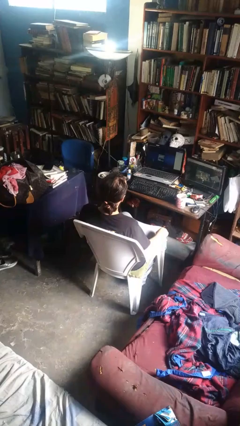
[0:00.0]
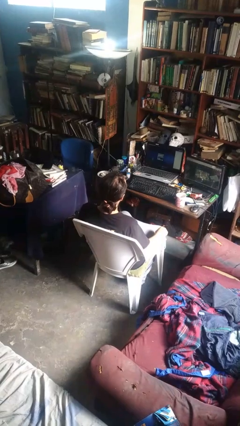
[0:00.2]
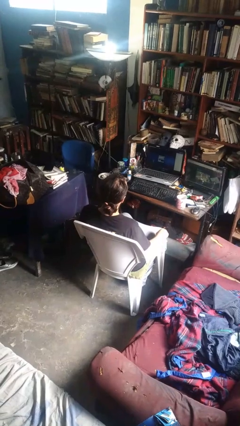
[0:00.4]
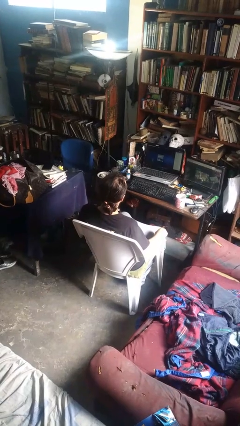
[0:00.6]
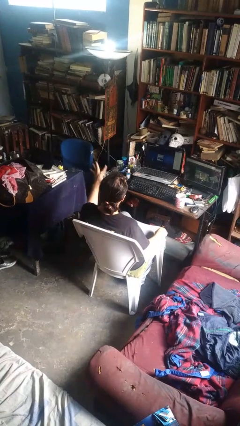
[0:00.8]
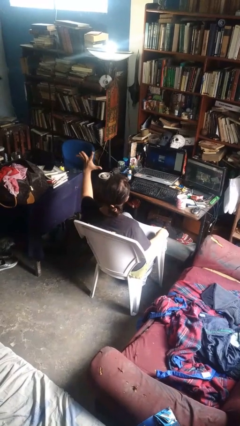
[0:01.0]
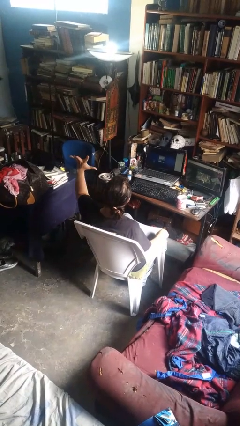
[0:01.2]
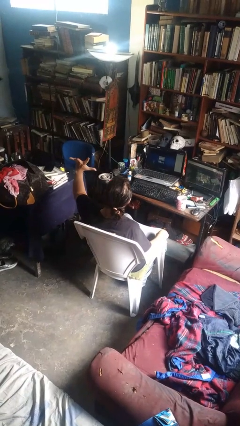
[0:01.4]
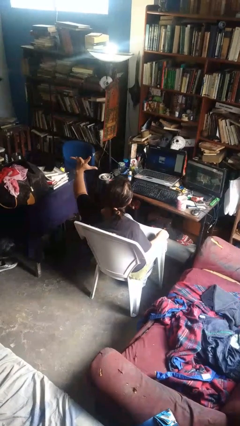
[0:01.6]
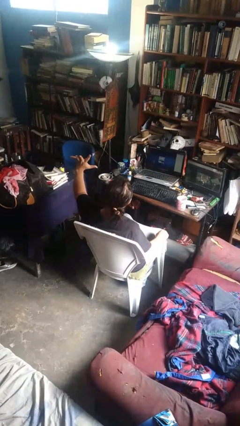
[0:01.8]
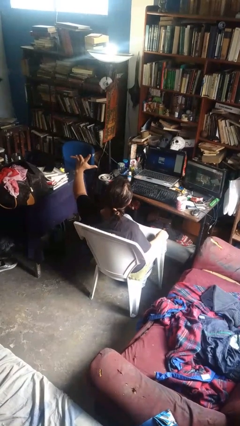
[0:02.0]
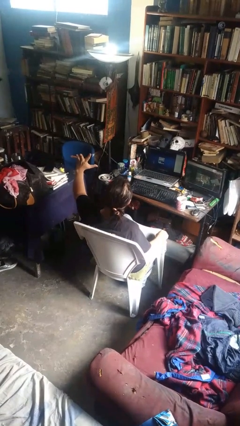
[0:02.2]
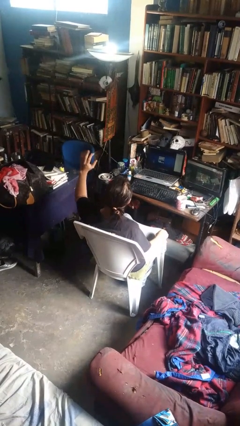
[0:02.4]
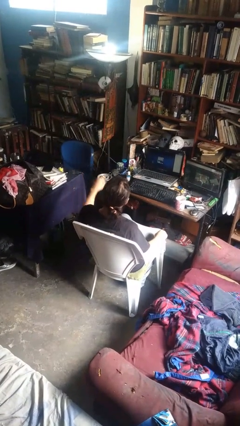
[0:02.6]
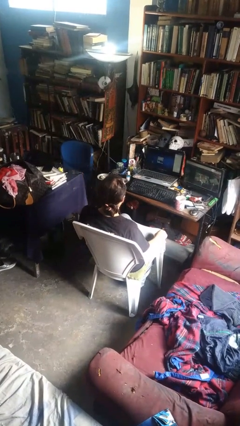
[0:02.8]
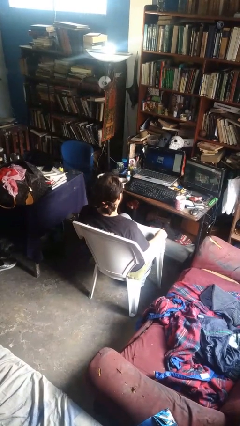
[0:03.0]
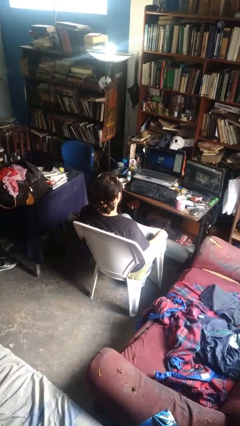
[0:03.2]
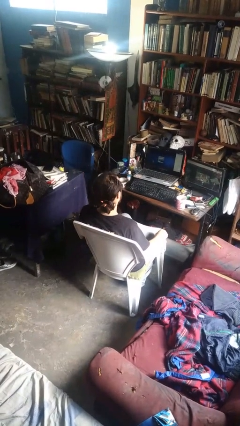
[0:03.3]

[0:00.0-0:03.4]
person gestures number five

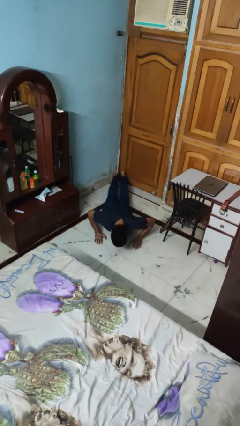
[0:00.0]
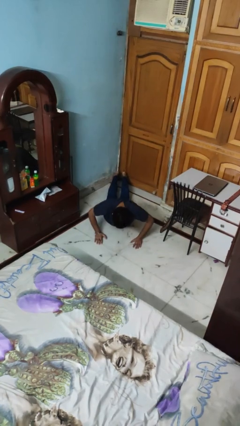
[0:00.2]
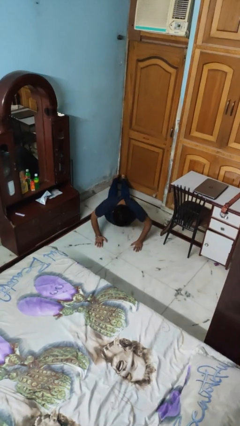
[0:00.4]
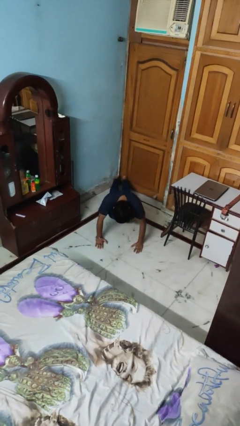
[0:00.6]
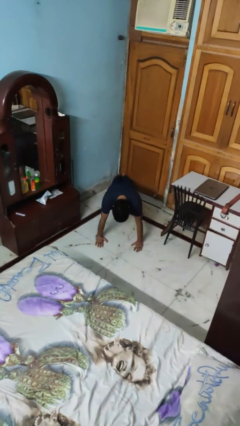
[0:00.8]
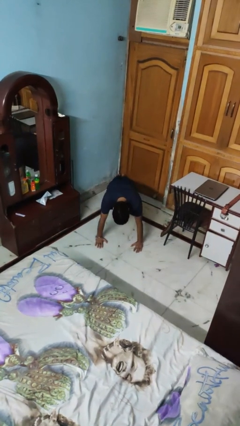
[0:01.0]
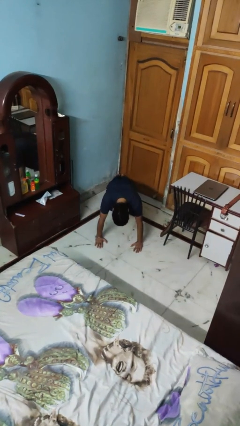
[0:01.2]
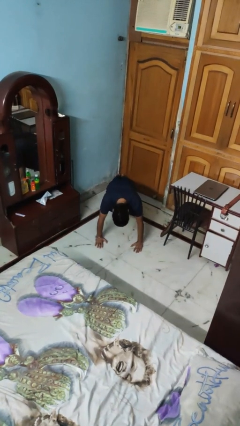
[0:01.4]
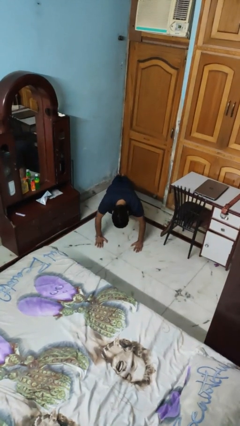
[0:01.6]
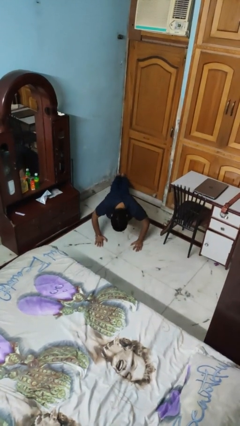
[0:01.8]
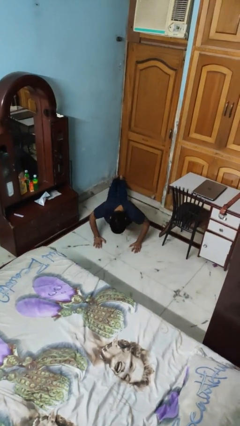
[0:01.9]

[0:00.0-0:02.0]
person exercises with pushup

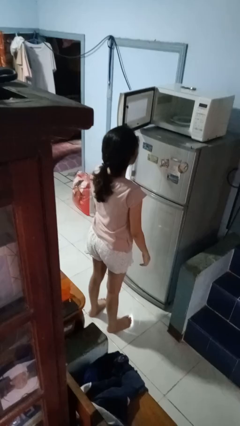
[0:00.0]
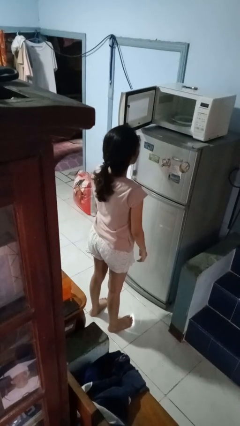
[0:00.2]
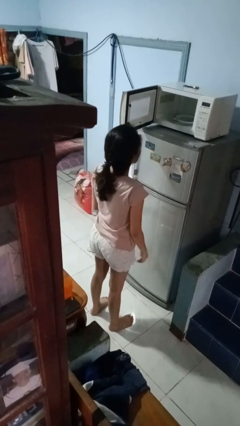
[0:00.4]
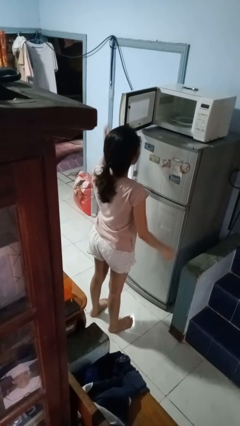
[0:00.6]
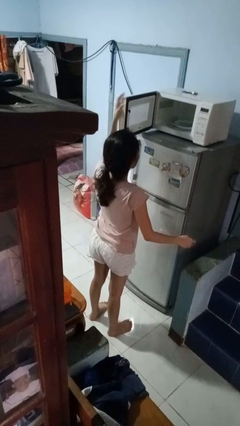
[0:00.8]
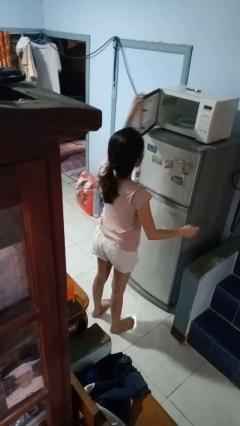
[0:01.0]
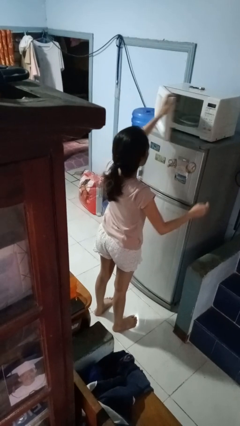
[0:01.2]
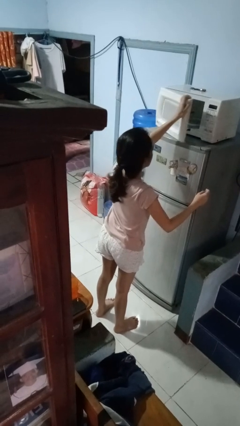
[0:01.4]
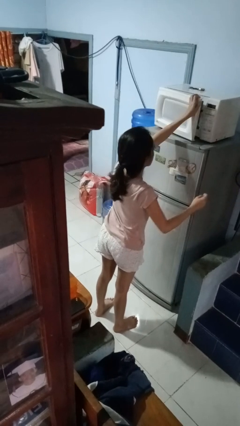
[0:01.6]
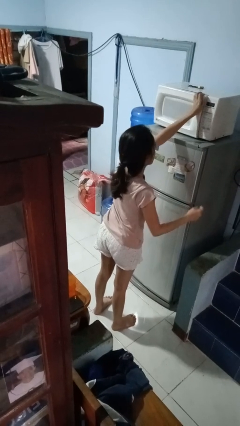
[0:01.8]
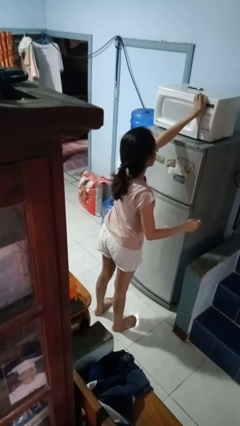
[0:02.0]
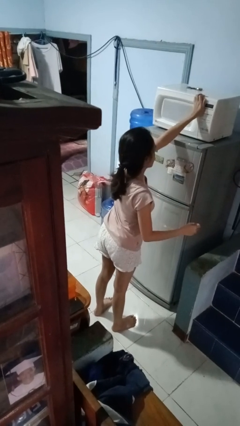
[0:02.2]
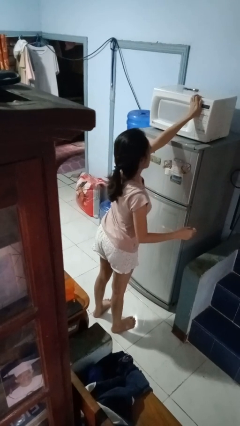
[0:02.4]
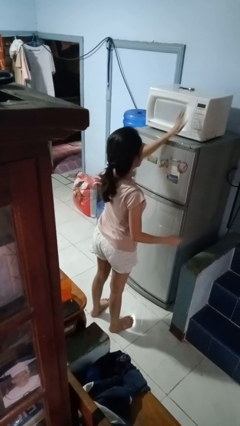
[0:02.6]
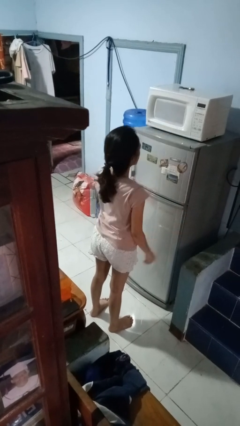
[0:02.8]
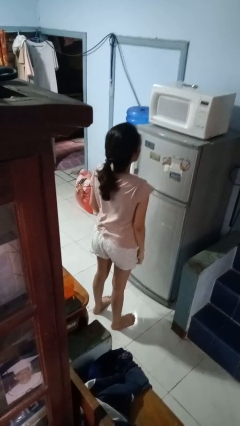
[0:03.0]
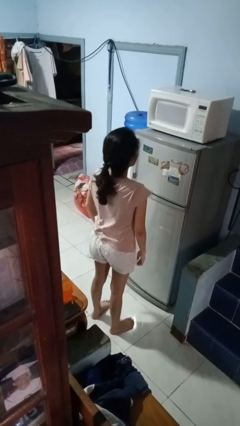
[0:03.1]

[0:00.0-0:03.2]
person closes microwave

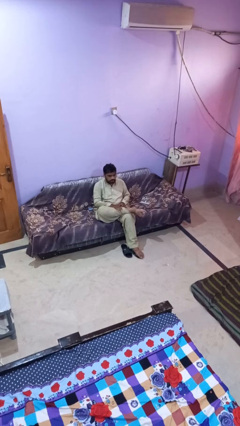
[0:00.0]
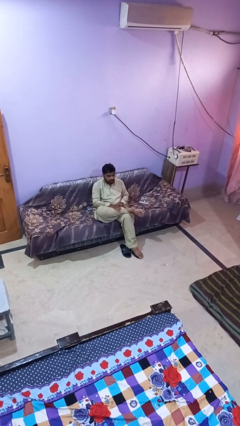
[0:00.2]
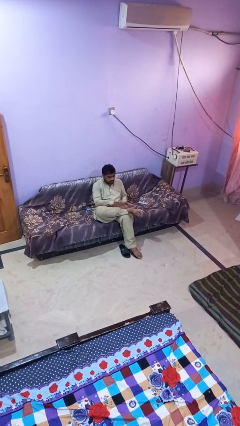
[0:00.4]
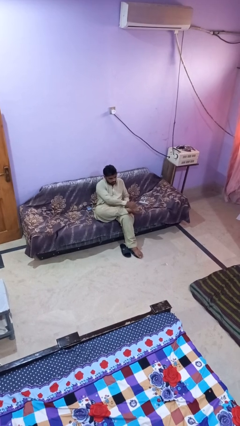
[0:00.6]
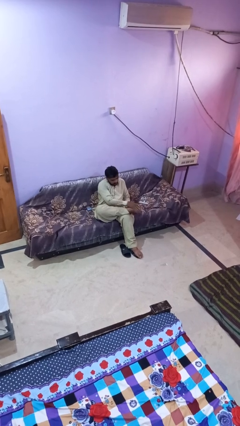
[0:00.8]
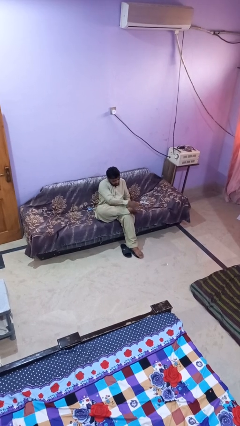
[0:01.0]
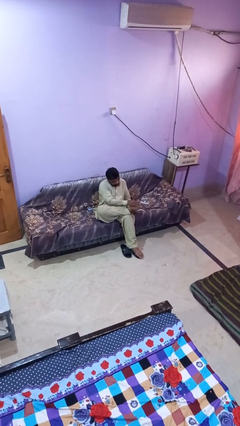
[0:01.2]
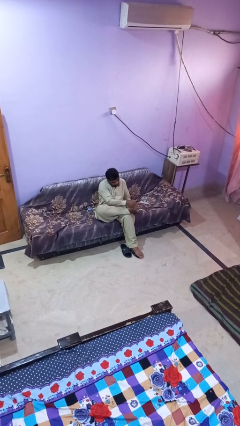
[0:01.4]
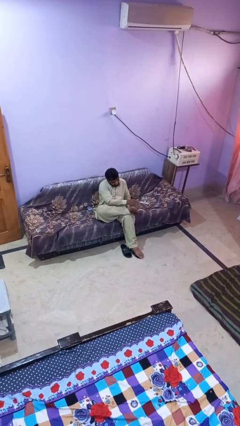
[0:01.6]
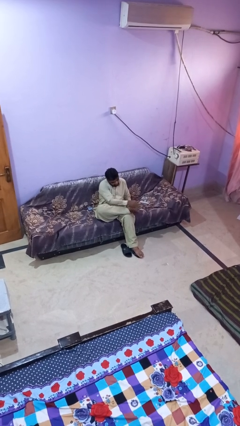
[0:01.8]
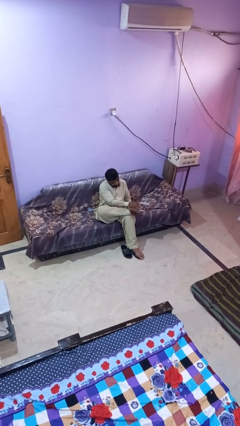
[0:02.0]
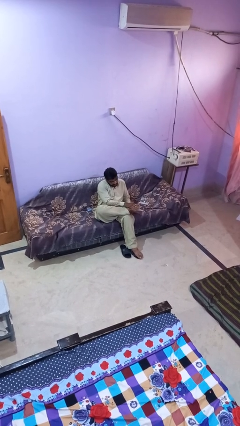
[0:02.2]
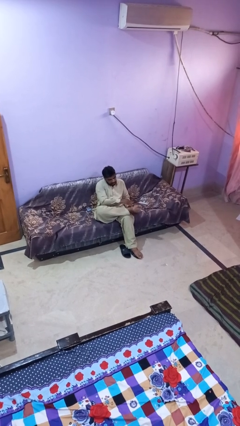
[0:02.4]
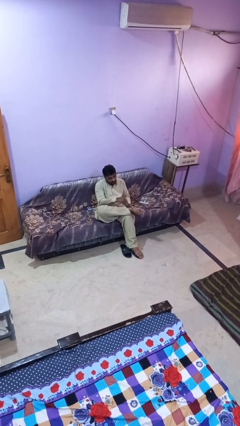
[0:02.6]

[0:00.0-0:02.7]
person rubs foot

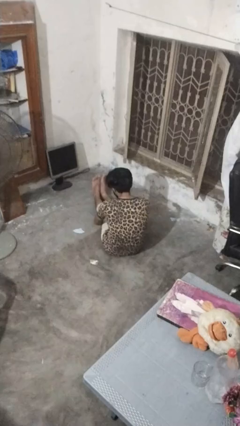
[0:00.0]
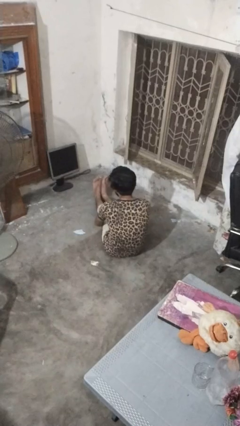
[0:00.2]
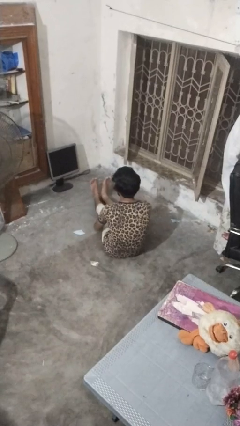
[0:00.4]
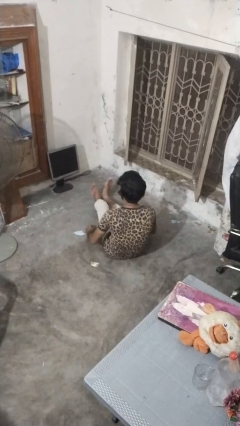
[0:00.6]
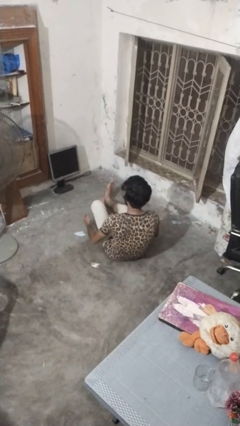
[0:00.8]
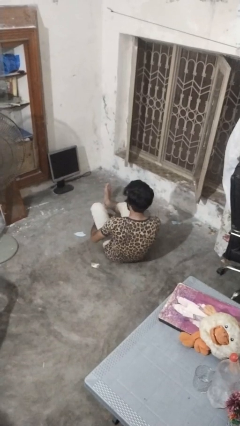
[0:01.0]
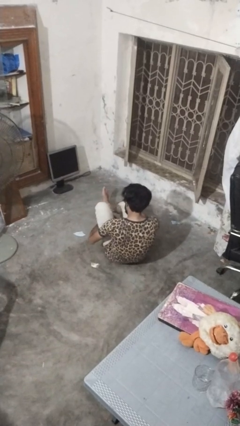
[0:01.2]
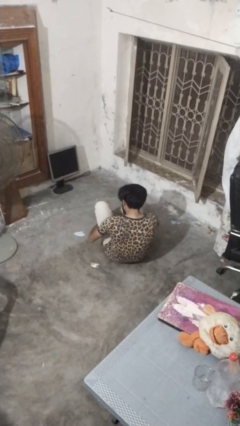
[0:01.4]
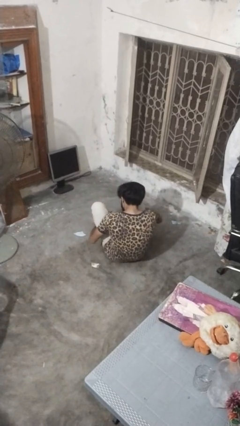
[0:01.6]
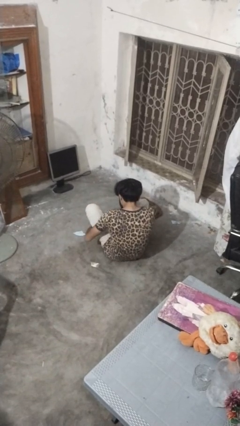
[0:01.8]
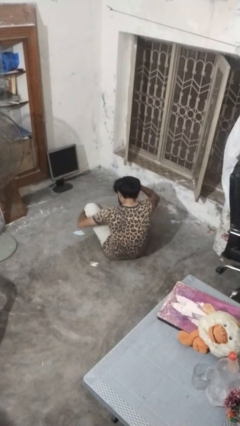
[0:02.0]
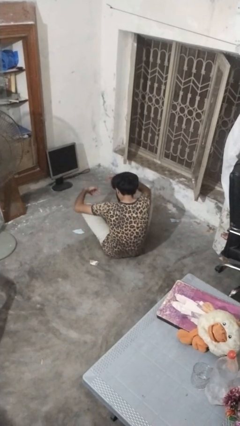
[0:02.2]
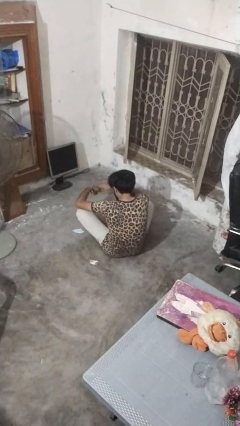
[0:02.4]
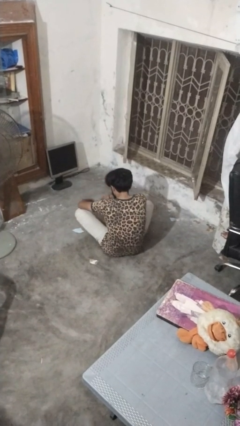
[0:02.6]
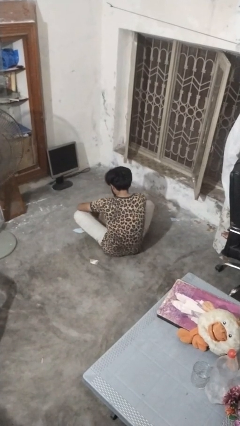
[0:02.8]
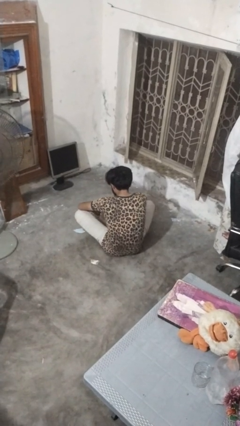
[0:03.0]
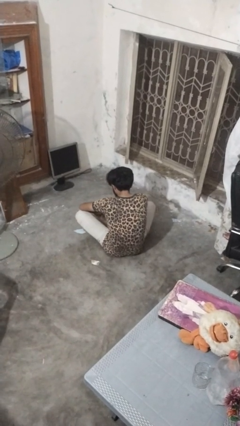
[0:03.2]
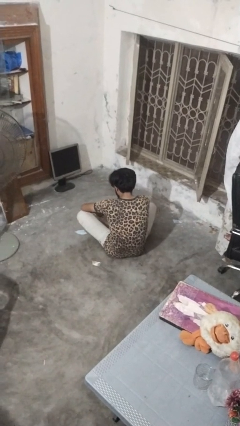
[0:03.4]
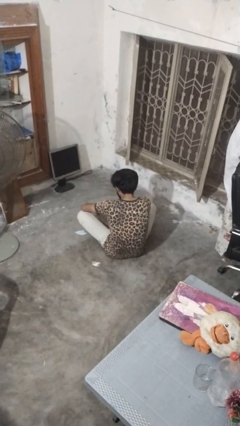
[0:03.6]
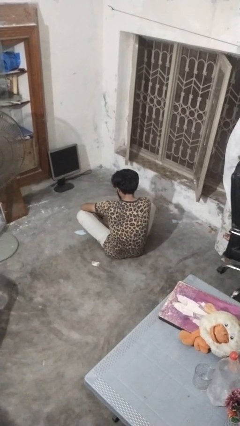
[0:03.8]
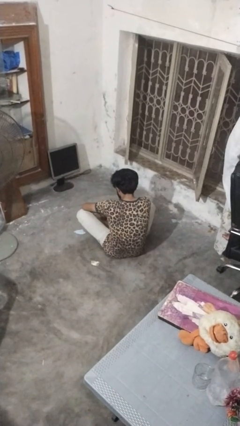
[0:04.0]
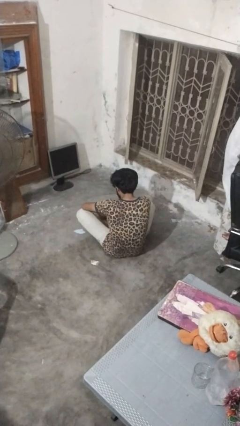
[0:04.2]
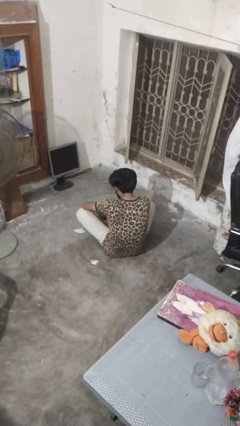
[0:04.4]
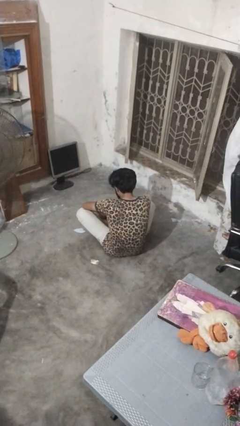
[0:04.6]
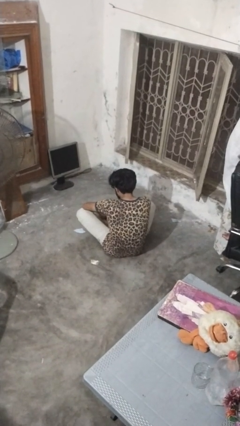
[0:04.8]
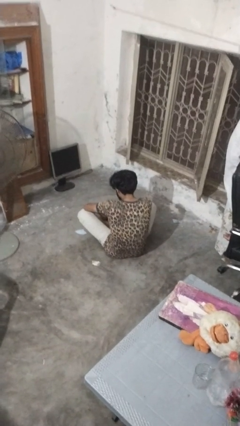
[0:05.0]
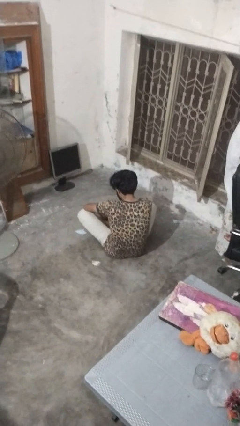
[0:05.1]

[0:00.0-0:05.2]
person crosses legs

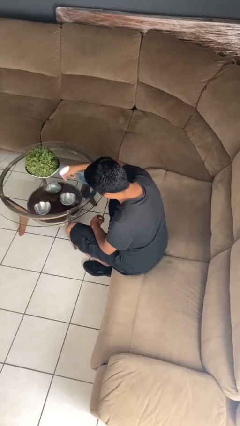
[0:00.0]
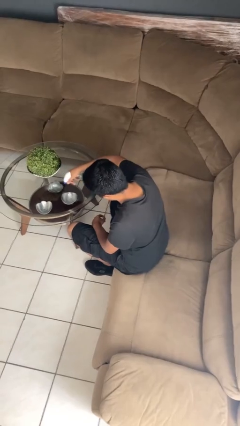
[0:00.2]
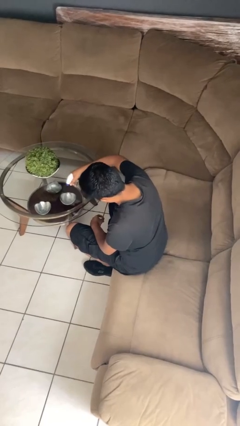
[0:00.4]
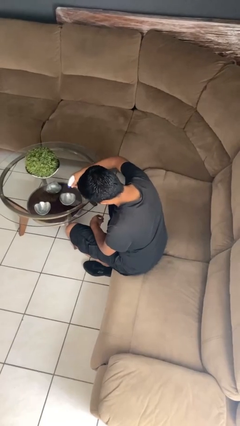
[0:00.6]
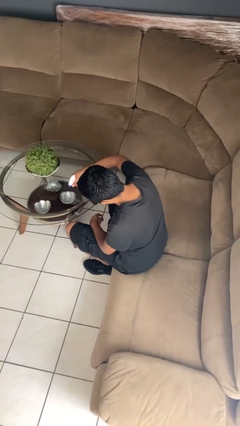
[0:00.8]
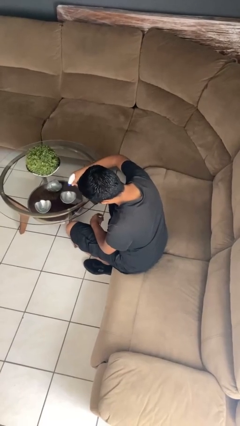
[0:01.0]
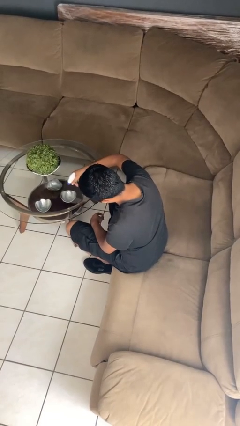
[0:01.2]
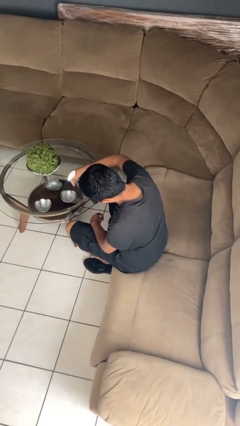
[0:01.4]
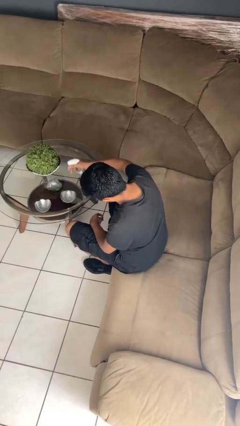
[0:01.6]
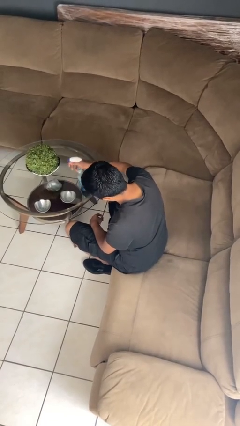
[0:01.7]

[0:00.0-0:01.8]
person sprays from bottle
